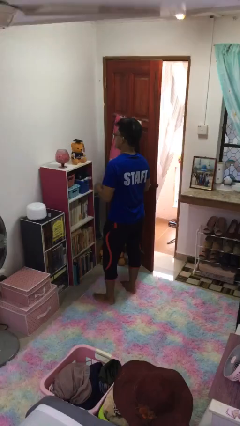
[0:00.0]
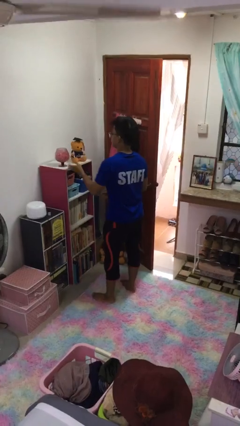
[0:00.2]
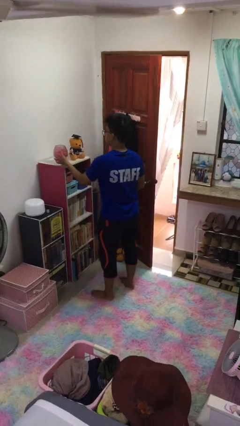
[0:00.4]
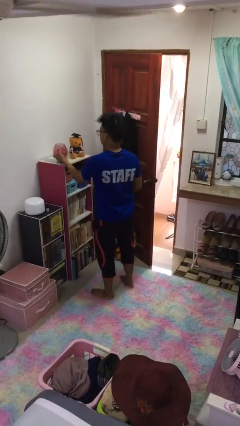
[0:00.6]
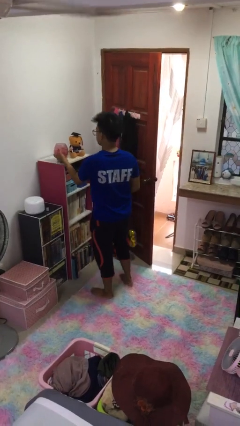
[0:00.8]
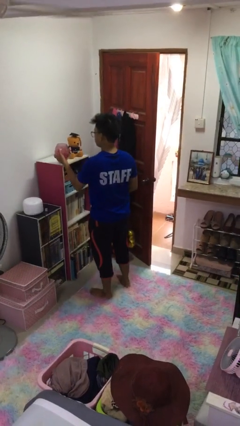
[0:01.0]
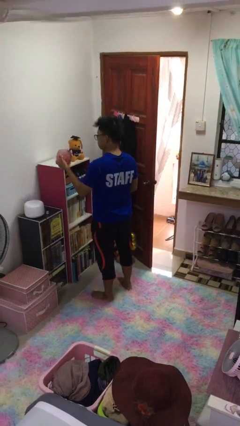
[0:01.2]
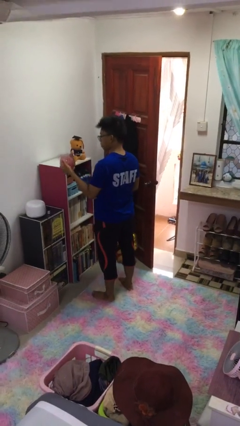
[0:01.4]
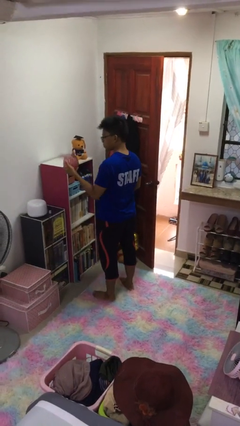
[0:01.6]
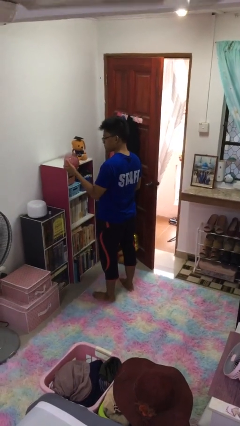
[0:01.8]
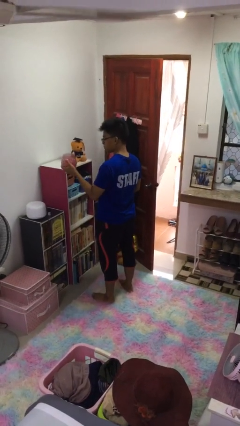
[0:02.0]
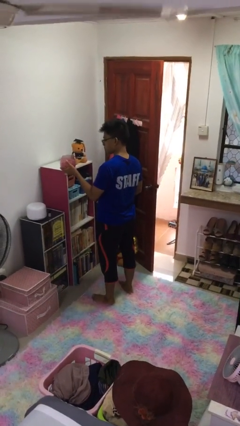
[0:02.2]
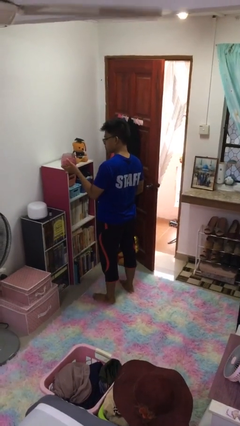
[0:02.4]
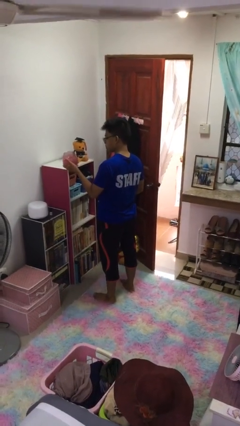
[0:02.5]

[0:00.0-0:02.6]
person picks up object from shelf

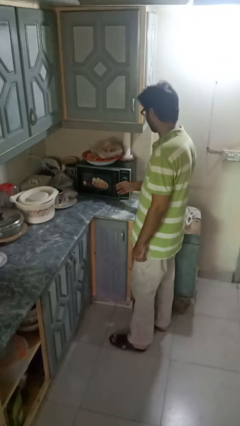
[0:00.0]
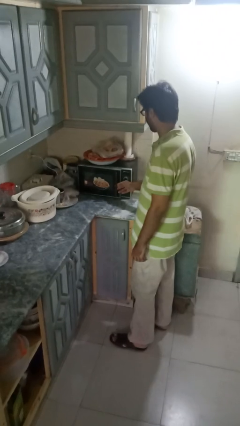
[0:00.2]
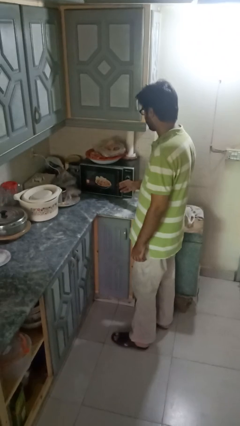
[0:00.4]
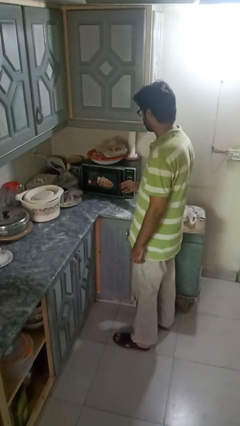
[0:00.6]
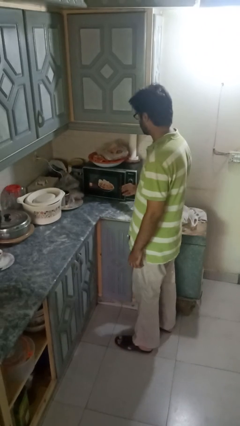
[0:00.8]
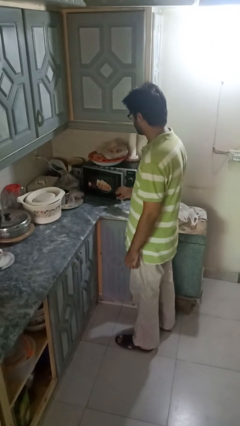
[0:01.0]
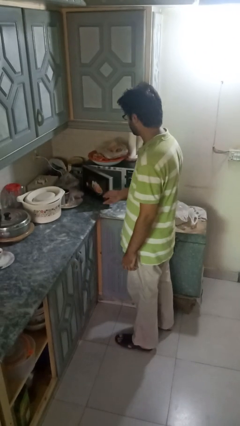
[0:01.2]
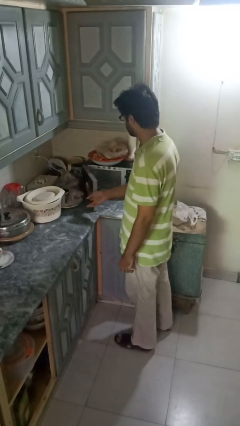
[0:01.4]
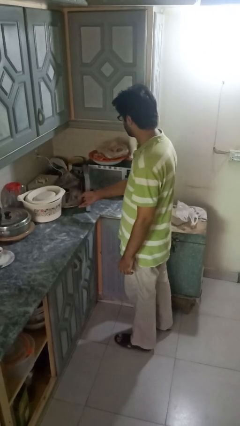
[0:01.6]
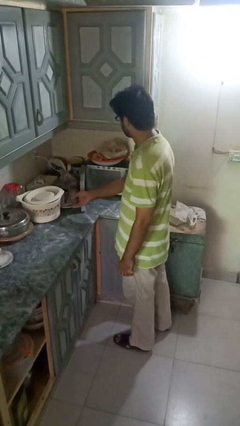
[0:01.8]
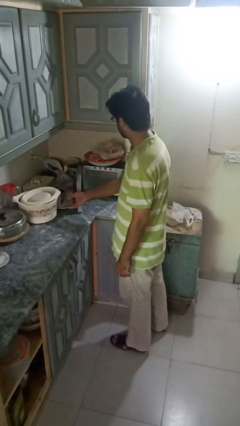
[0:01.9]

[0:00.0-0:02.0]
person opens microwave

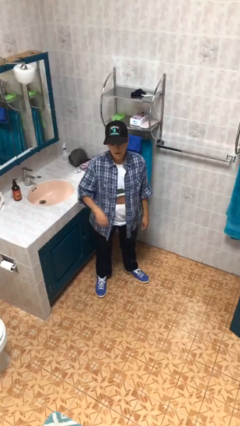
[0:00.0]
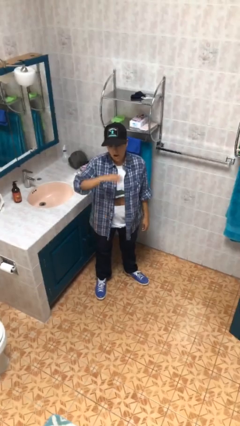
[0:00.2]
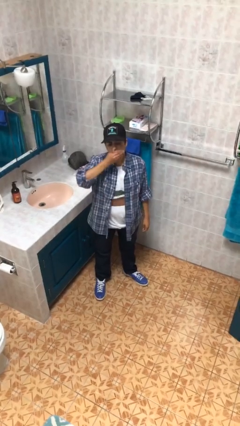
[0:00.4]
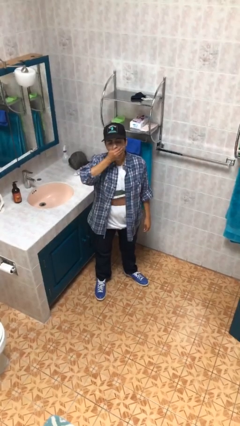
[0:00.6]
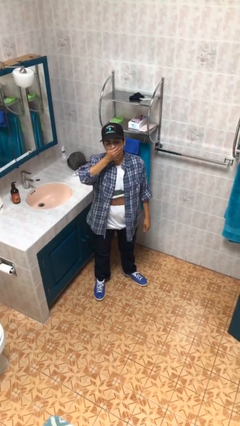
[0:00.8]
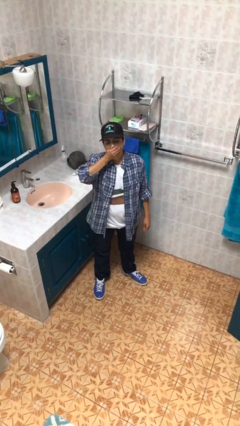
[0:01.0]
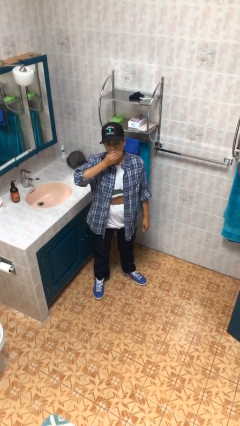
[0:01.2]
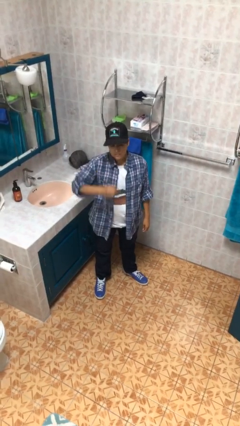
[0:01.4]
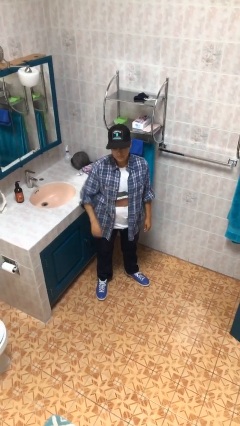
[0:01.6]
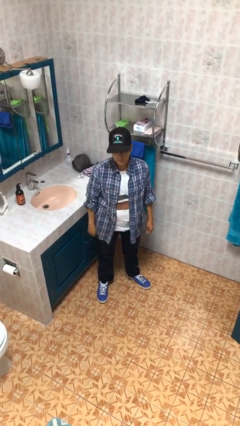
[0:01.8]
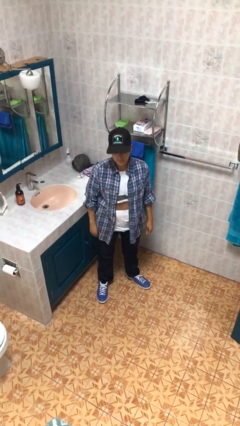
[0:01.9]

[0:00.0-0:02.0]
person yawns

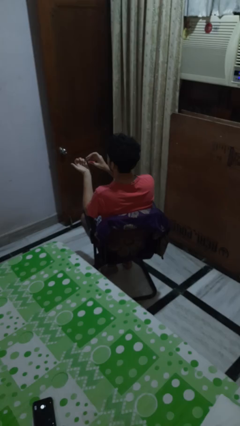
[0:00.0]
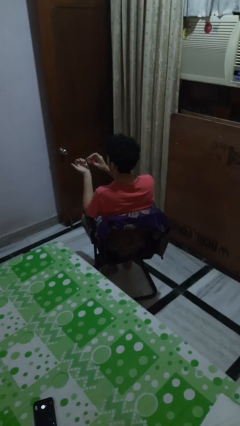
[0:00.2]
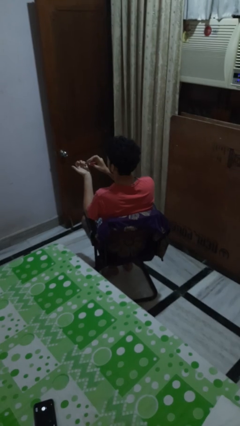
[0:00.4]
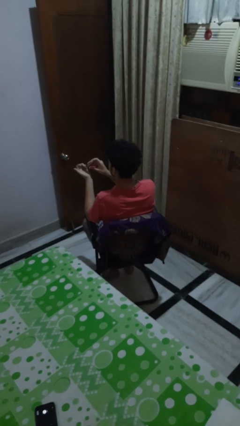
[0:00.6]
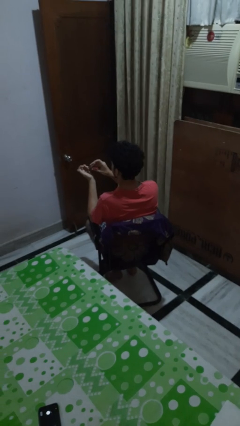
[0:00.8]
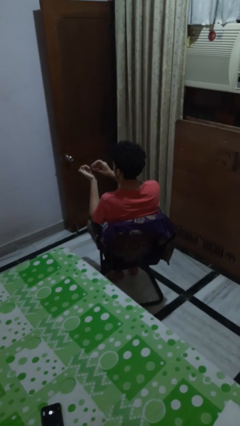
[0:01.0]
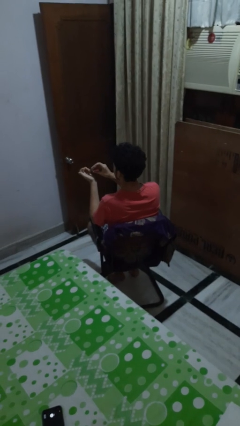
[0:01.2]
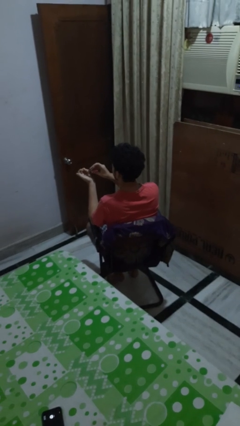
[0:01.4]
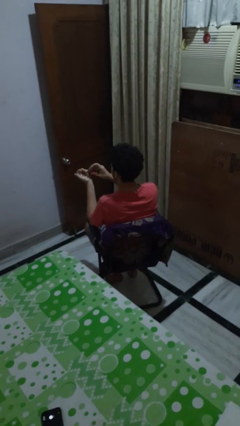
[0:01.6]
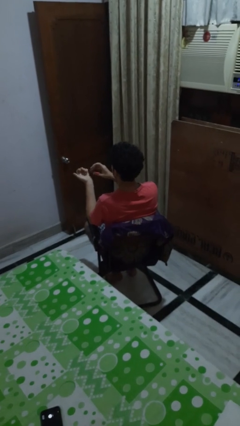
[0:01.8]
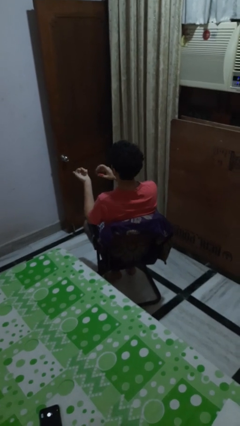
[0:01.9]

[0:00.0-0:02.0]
person clips fingernails

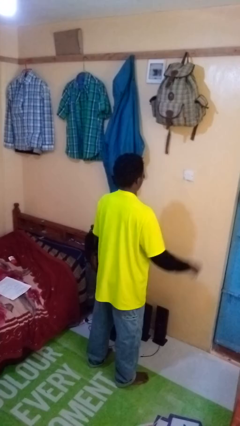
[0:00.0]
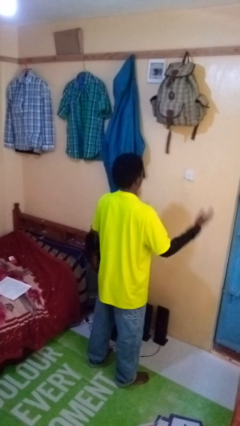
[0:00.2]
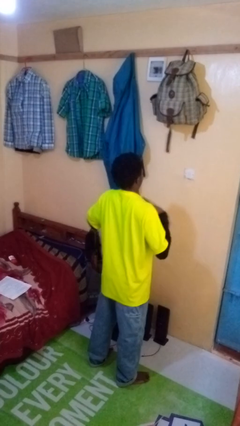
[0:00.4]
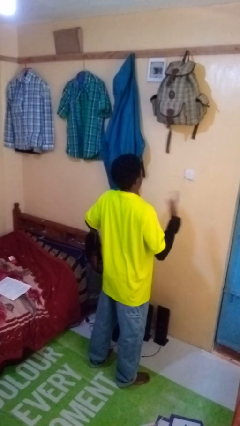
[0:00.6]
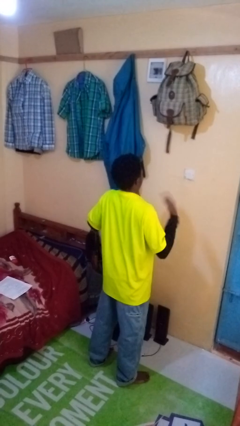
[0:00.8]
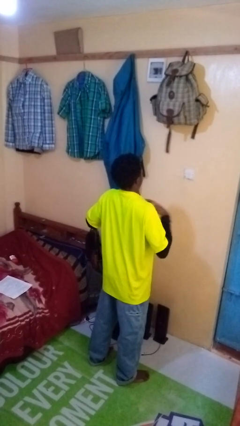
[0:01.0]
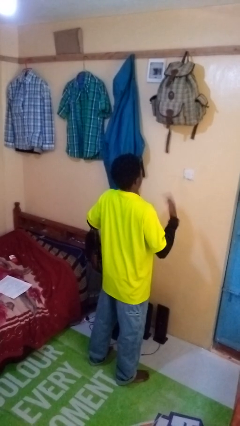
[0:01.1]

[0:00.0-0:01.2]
person drums on chest

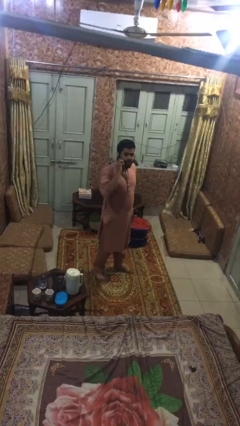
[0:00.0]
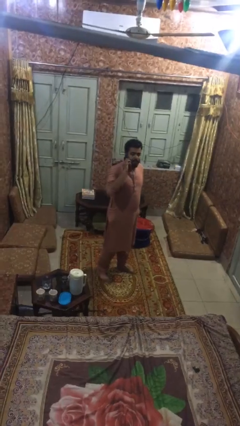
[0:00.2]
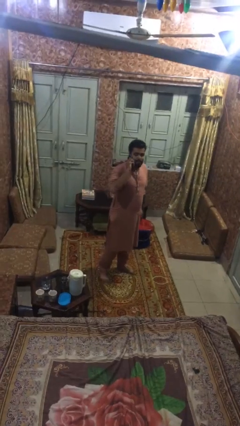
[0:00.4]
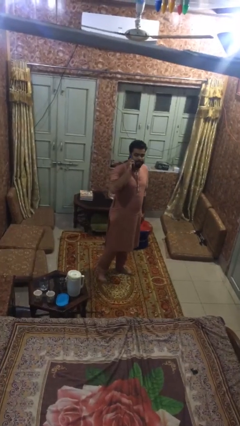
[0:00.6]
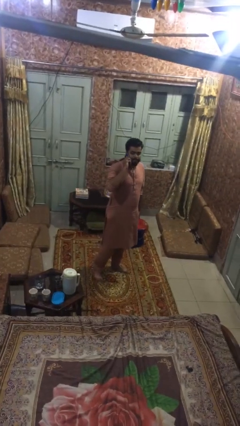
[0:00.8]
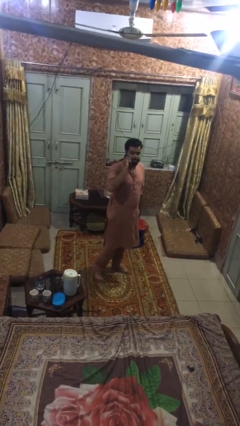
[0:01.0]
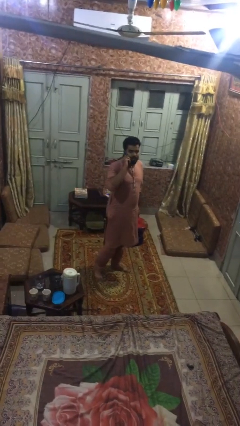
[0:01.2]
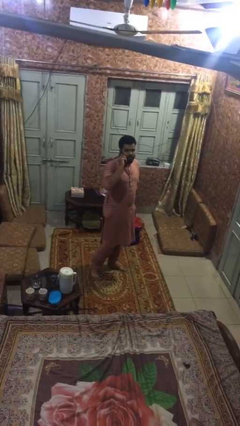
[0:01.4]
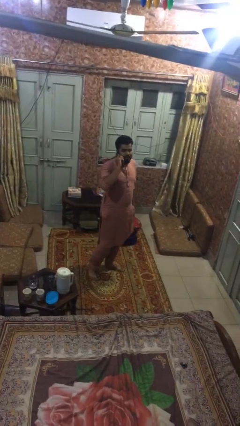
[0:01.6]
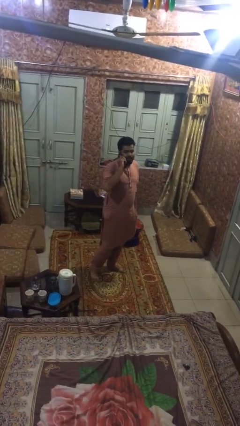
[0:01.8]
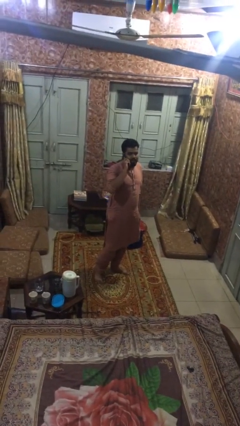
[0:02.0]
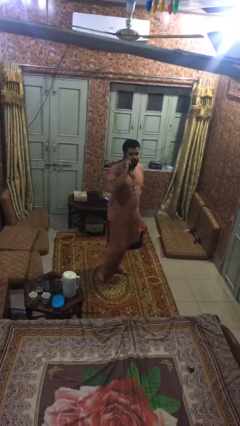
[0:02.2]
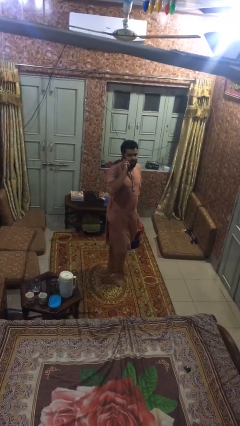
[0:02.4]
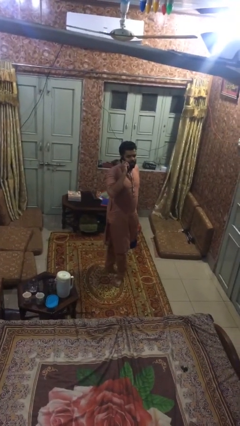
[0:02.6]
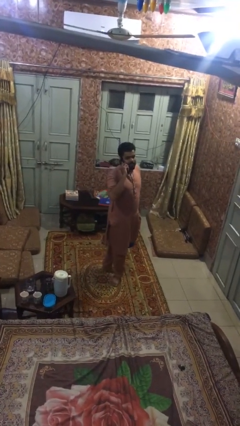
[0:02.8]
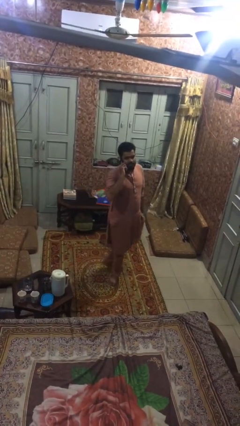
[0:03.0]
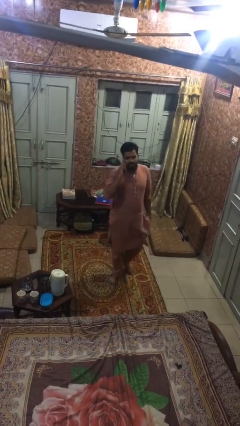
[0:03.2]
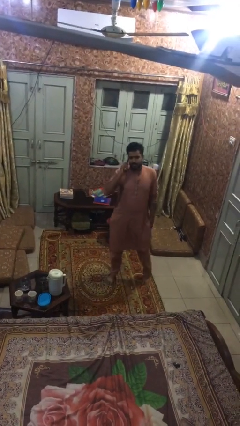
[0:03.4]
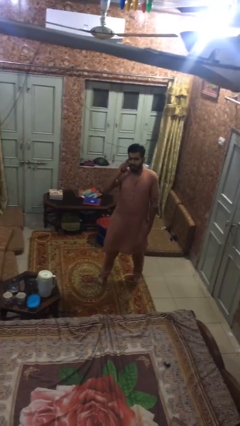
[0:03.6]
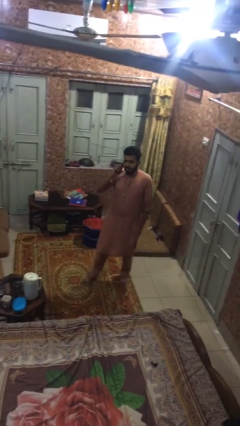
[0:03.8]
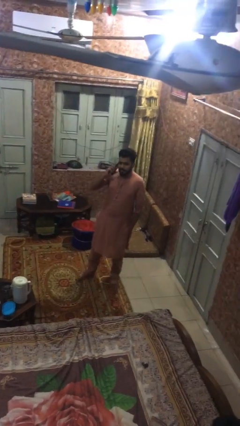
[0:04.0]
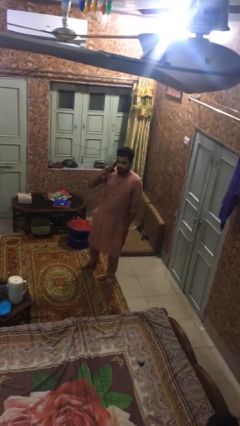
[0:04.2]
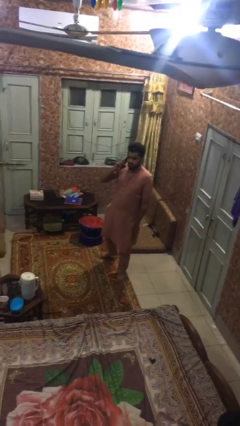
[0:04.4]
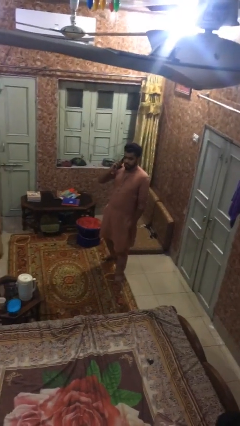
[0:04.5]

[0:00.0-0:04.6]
person talks on phone

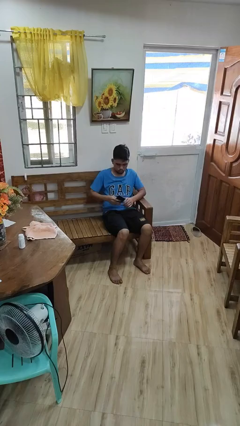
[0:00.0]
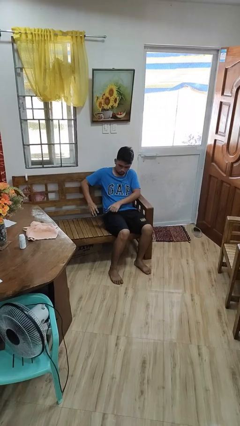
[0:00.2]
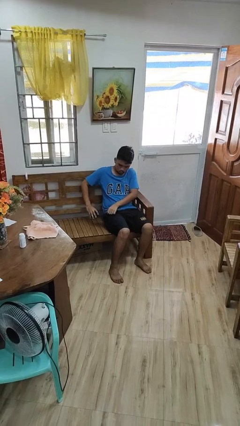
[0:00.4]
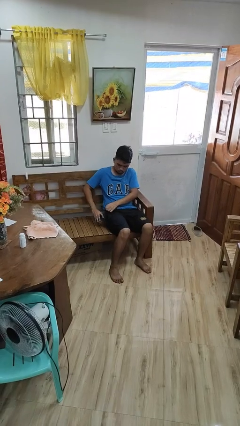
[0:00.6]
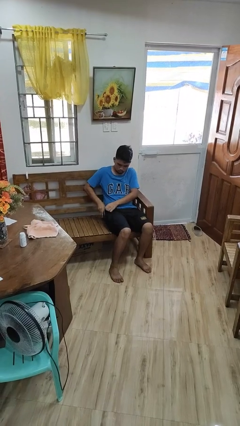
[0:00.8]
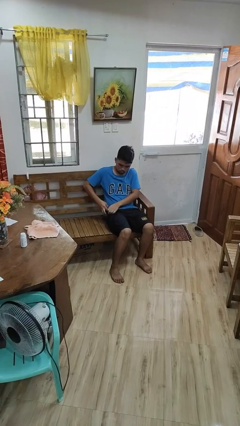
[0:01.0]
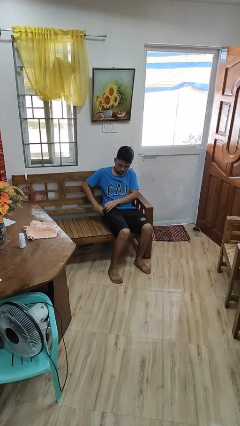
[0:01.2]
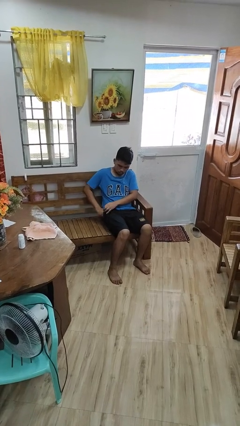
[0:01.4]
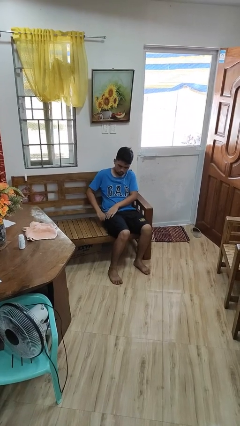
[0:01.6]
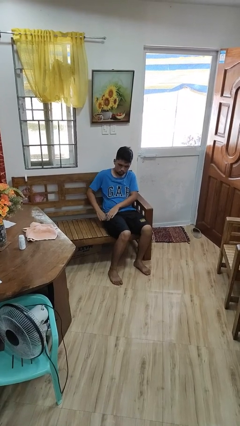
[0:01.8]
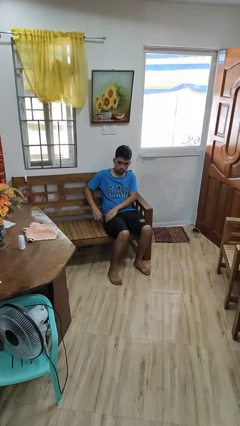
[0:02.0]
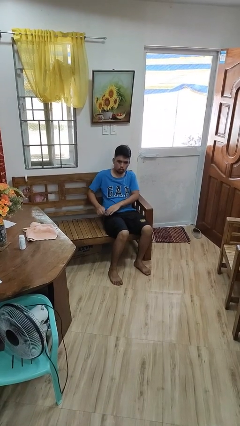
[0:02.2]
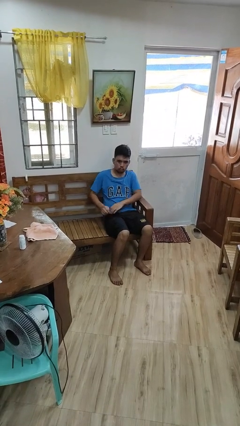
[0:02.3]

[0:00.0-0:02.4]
person puts phone into pocket
